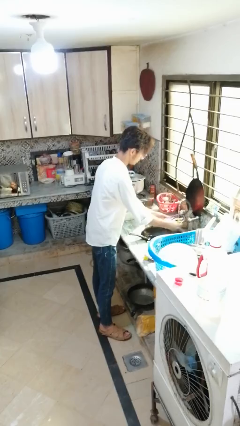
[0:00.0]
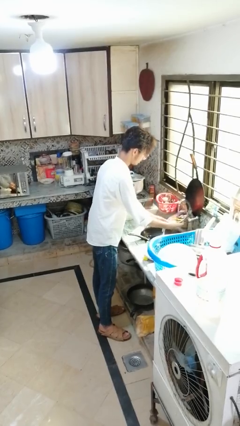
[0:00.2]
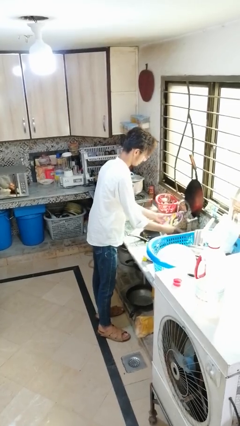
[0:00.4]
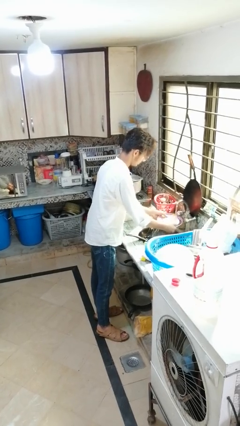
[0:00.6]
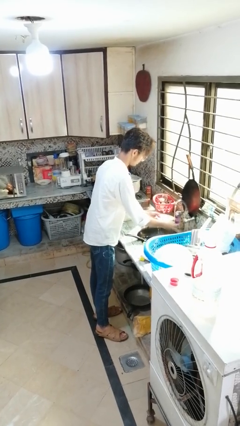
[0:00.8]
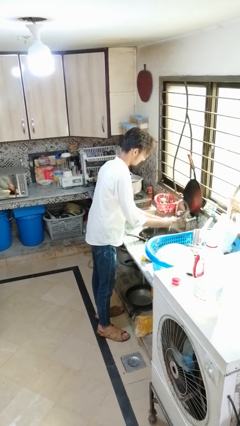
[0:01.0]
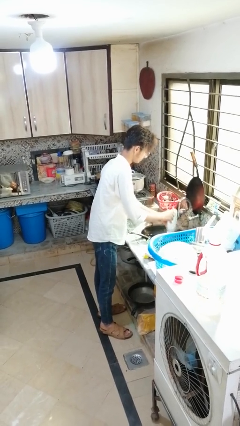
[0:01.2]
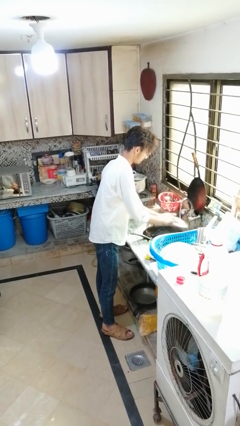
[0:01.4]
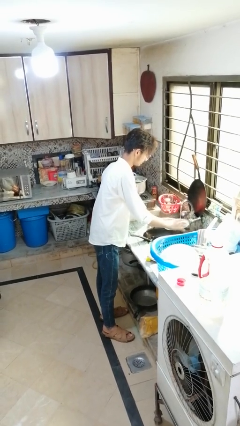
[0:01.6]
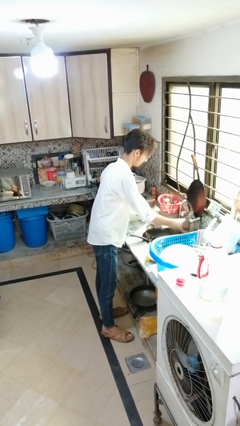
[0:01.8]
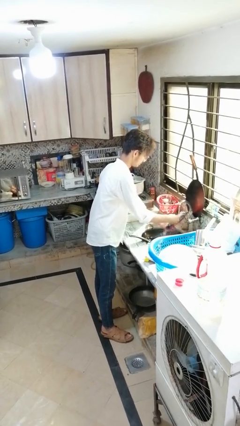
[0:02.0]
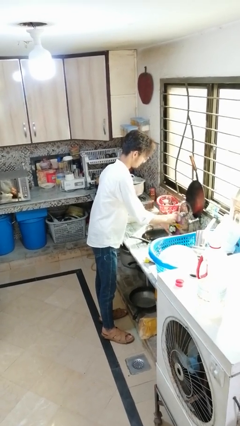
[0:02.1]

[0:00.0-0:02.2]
person washes dish

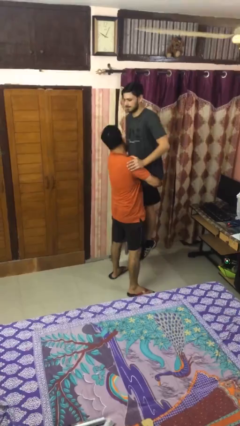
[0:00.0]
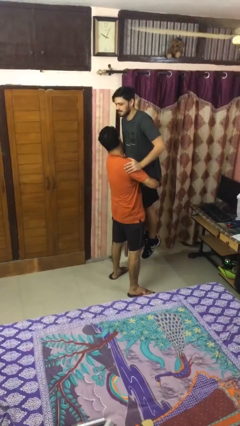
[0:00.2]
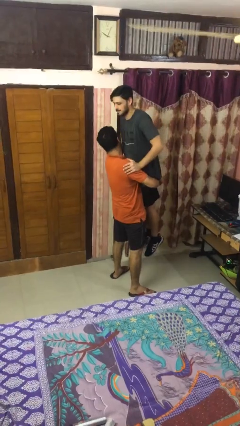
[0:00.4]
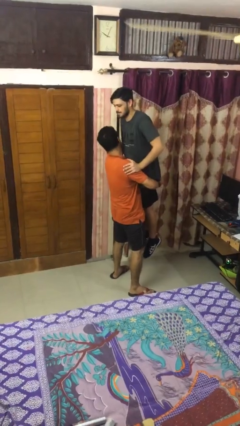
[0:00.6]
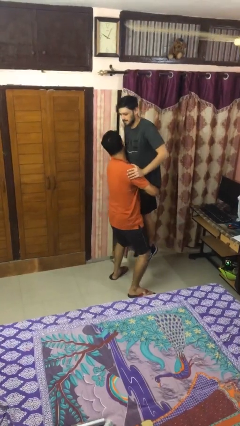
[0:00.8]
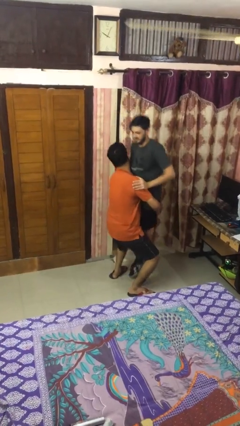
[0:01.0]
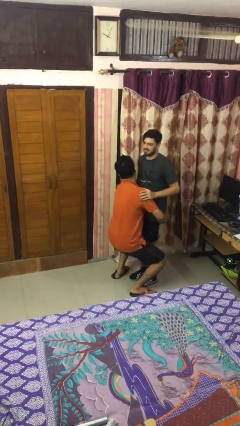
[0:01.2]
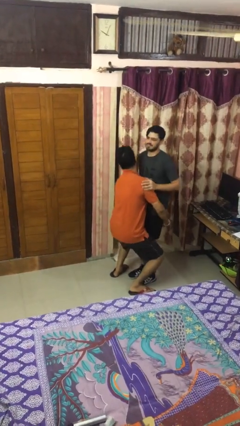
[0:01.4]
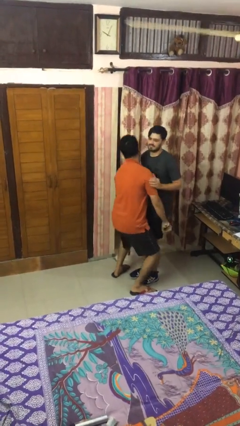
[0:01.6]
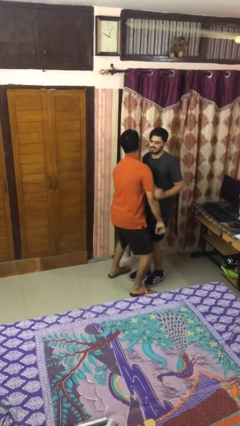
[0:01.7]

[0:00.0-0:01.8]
person puts down person

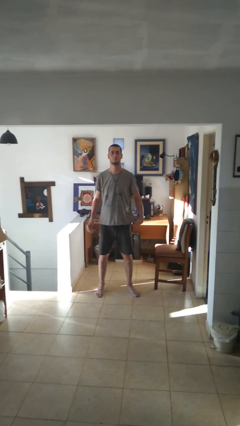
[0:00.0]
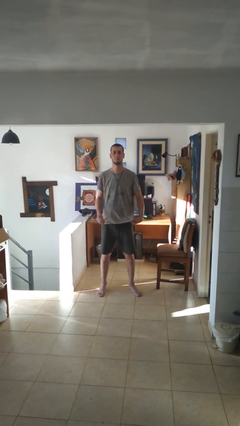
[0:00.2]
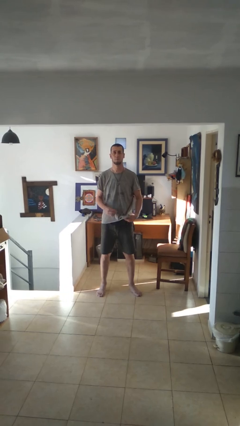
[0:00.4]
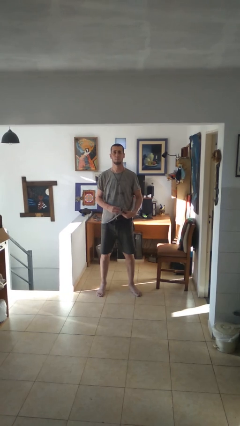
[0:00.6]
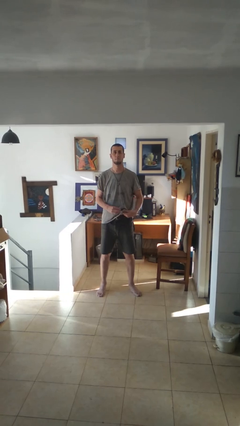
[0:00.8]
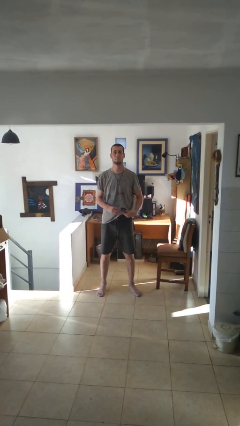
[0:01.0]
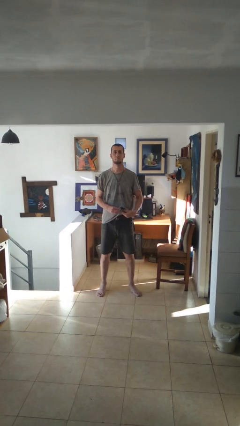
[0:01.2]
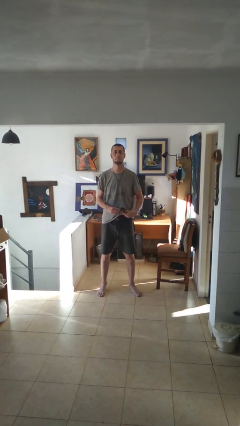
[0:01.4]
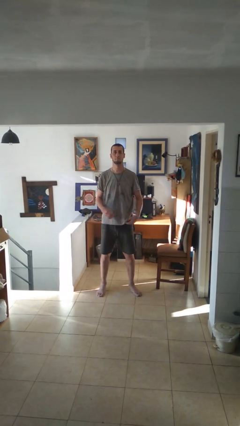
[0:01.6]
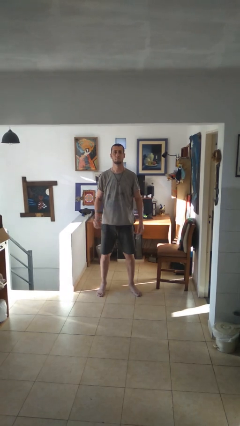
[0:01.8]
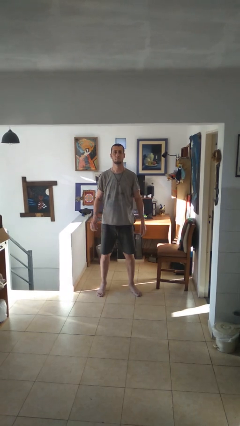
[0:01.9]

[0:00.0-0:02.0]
person cleans eyeglasses

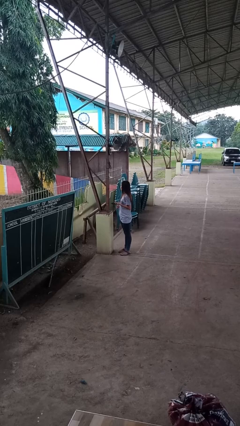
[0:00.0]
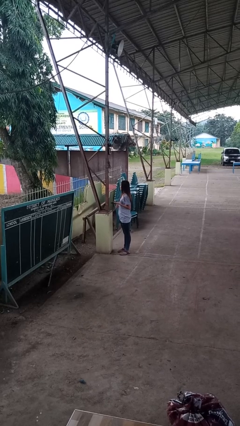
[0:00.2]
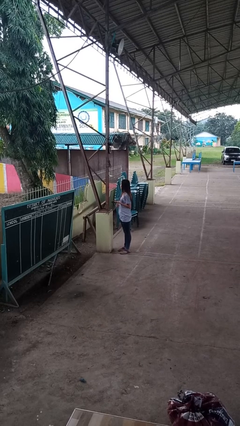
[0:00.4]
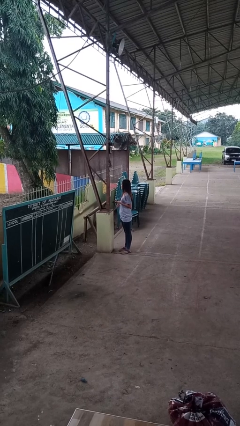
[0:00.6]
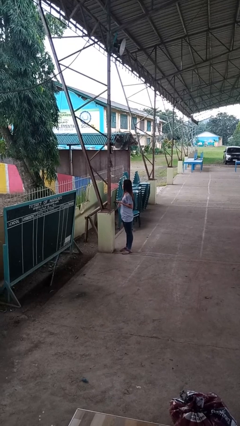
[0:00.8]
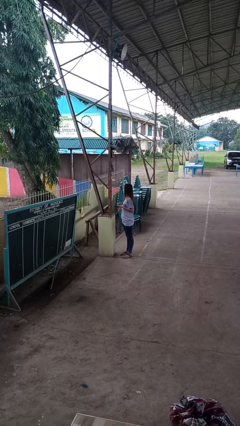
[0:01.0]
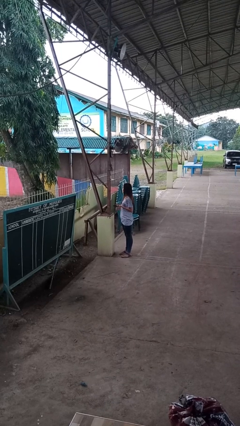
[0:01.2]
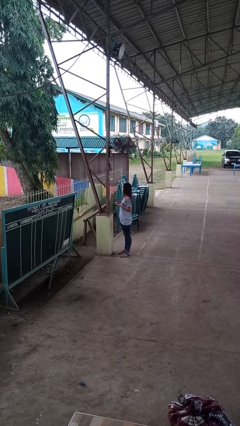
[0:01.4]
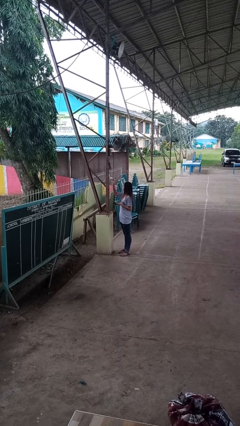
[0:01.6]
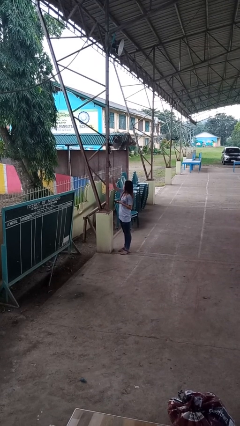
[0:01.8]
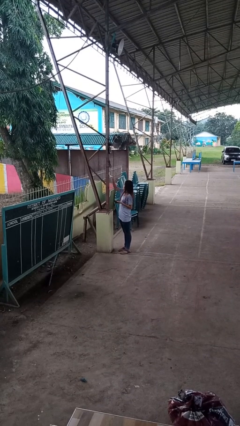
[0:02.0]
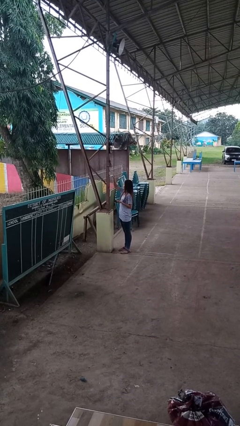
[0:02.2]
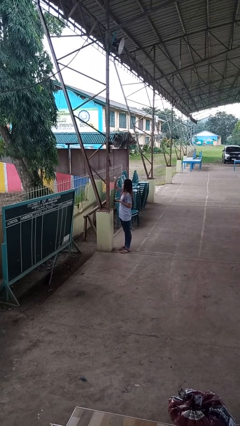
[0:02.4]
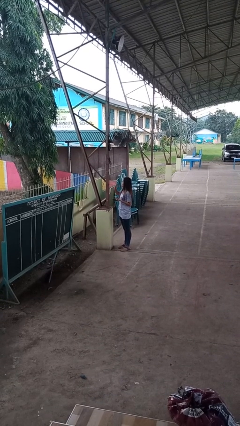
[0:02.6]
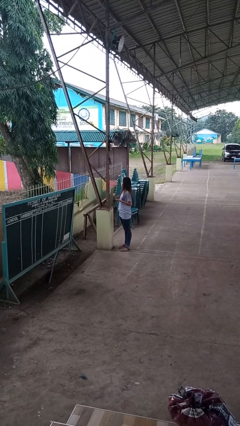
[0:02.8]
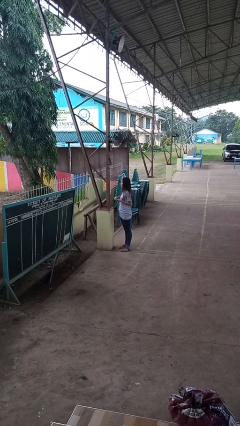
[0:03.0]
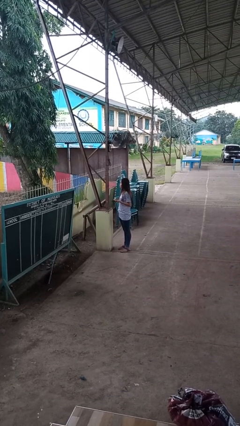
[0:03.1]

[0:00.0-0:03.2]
person unplugs from electrical socket

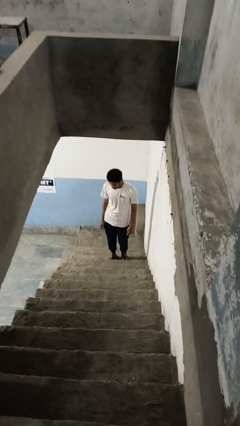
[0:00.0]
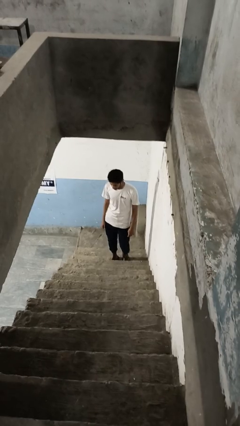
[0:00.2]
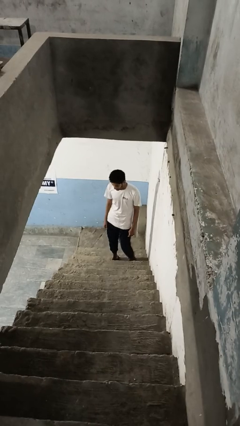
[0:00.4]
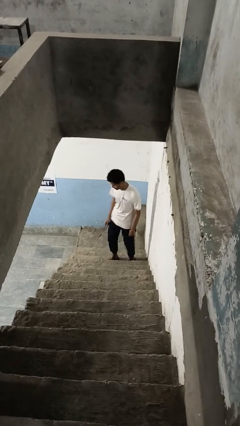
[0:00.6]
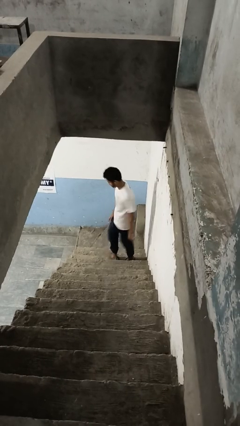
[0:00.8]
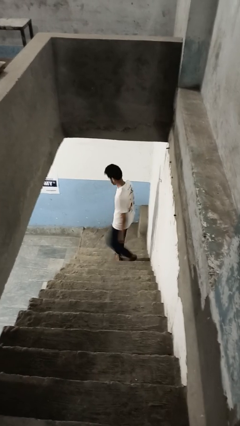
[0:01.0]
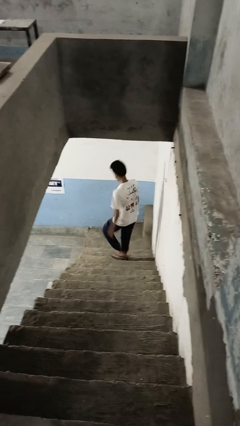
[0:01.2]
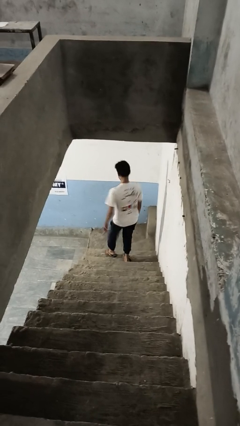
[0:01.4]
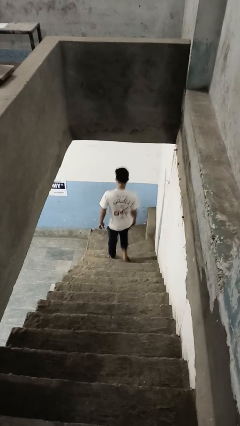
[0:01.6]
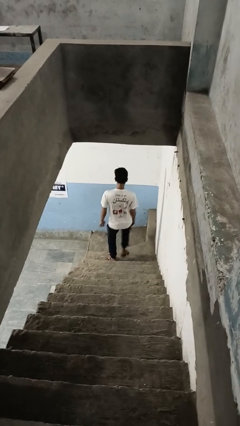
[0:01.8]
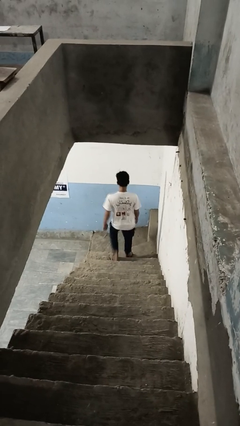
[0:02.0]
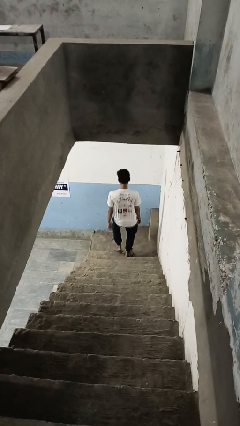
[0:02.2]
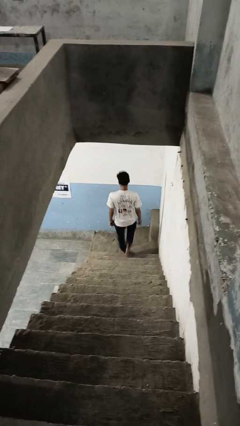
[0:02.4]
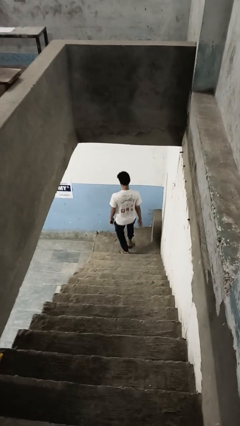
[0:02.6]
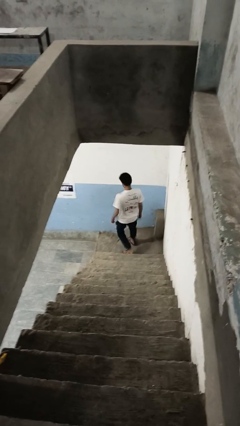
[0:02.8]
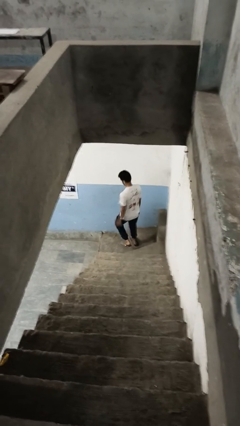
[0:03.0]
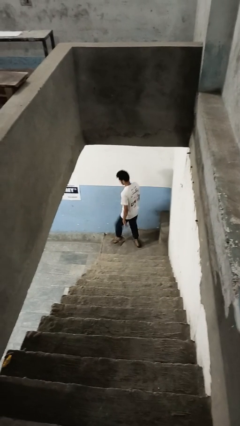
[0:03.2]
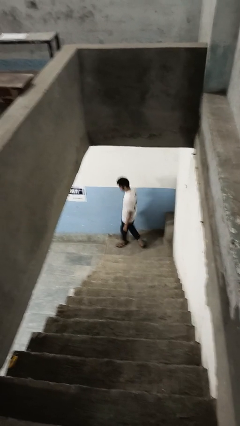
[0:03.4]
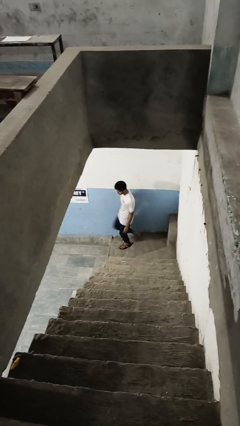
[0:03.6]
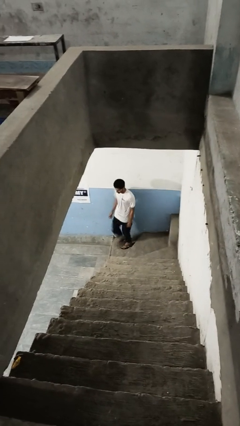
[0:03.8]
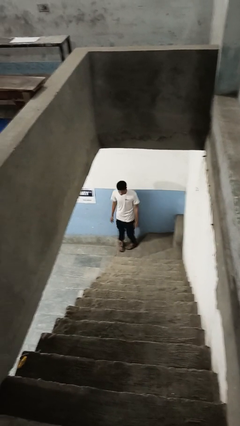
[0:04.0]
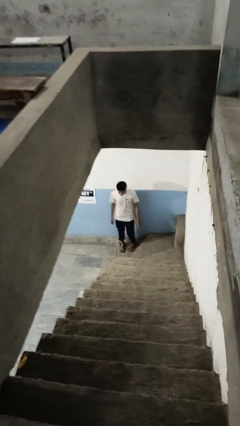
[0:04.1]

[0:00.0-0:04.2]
person climbs down stairs

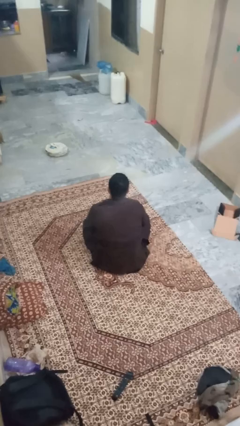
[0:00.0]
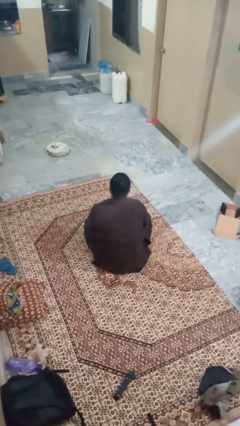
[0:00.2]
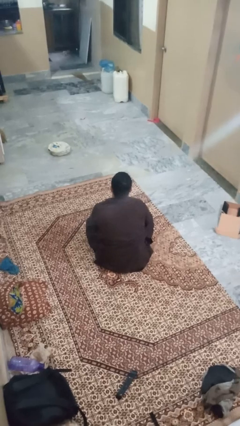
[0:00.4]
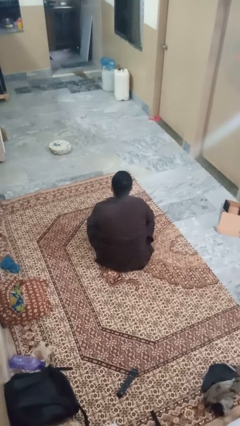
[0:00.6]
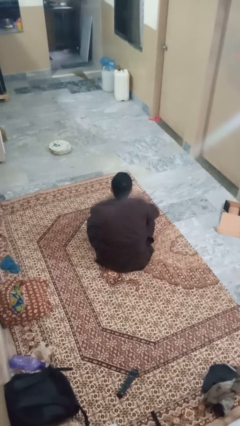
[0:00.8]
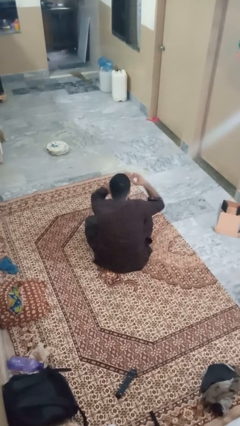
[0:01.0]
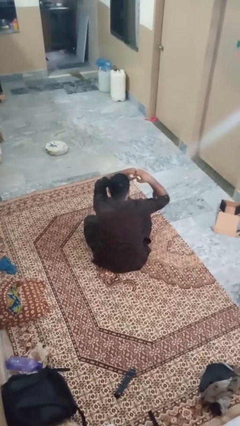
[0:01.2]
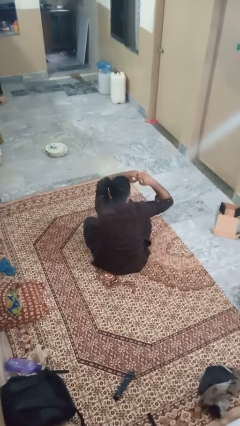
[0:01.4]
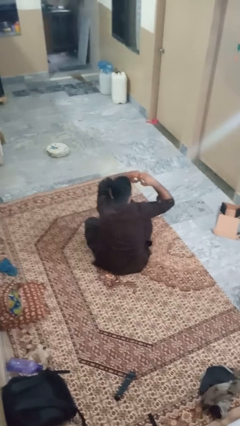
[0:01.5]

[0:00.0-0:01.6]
person gestures heart

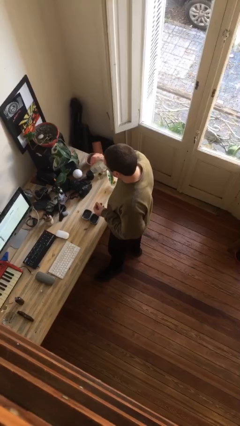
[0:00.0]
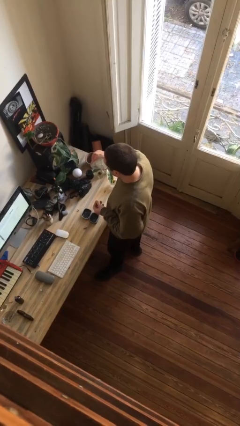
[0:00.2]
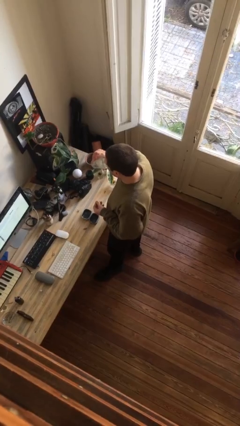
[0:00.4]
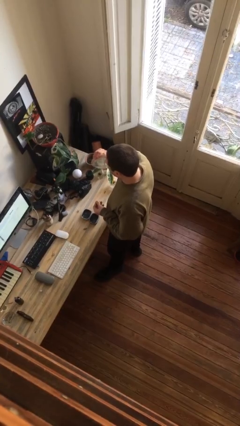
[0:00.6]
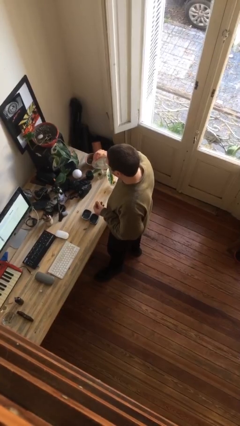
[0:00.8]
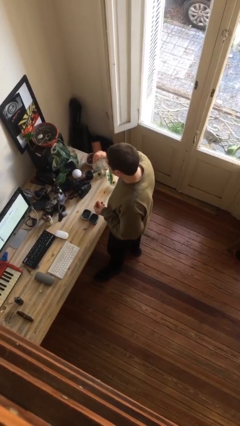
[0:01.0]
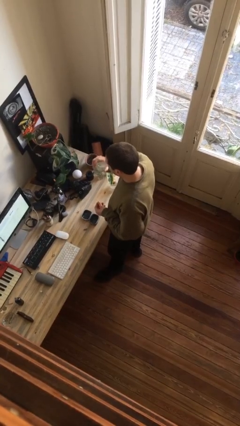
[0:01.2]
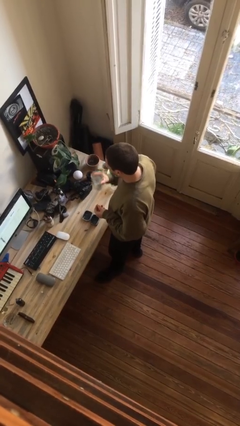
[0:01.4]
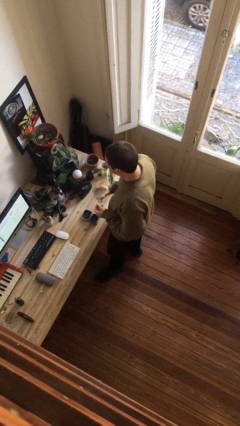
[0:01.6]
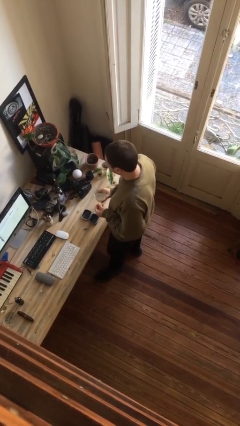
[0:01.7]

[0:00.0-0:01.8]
person drinks from cup
